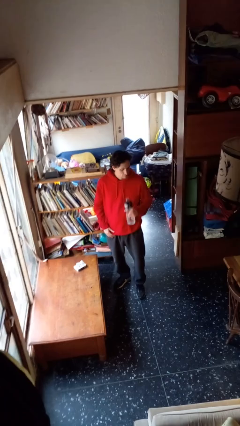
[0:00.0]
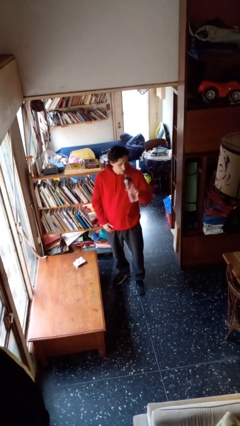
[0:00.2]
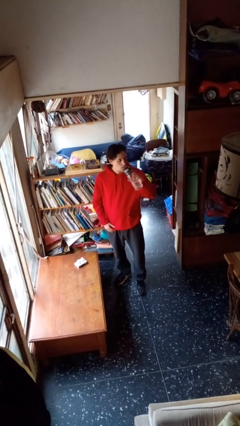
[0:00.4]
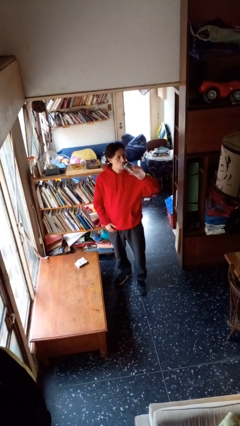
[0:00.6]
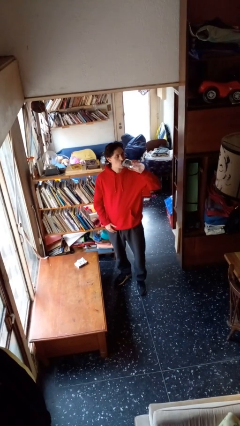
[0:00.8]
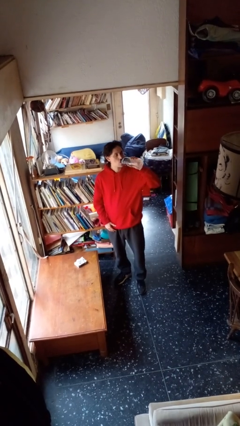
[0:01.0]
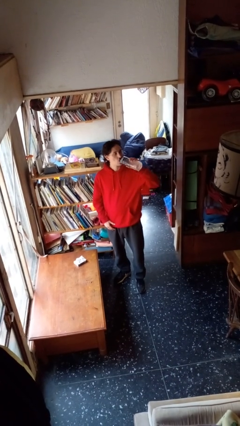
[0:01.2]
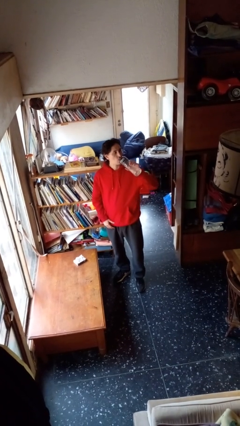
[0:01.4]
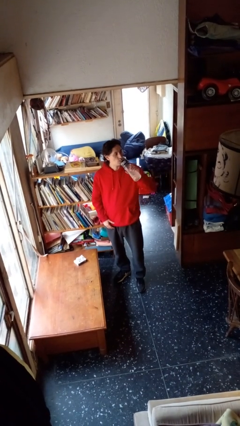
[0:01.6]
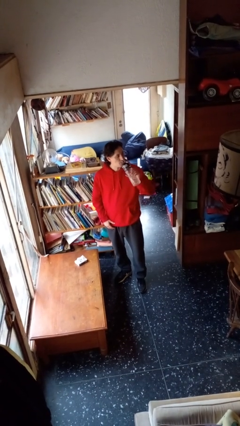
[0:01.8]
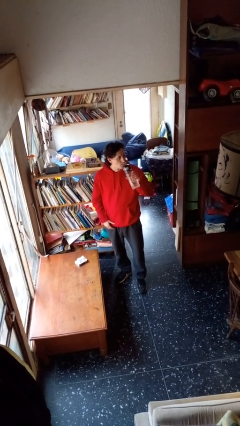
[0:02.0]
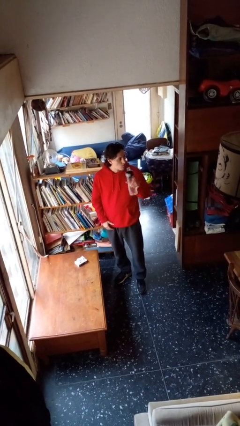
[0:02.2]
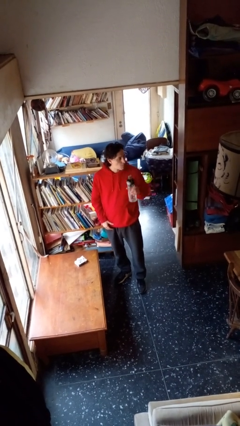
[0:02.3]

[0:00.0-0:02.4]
person drinks from bottle

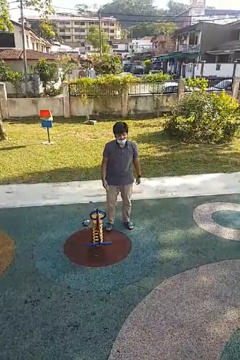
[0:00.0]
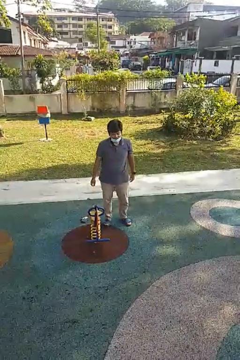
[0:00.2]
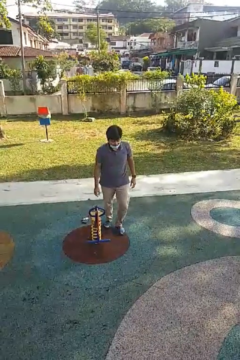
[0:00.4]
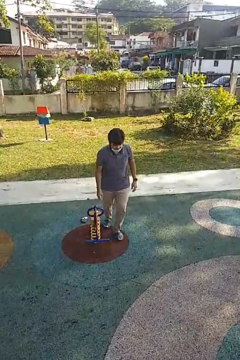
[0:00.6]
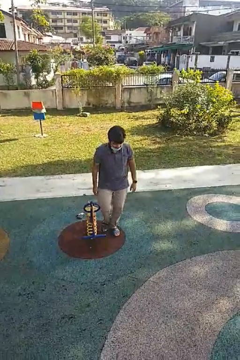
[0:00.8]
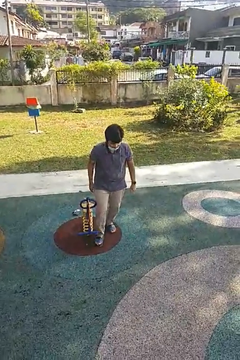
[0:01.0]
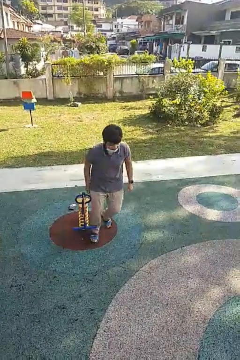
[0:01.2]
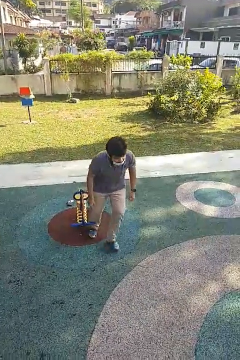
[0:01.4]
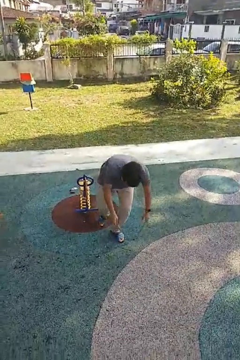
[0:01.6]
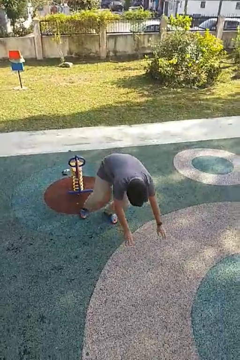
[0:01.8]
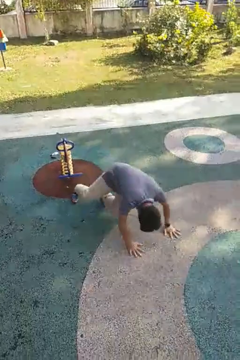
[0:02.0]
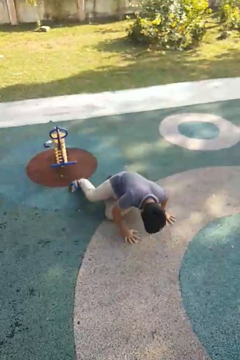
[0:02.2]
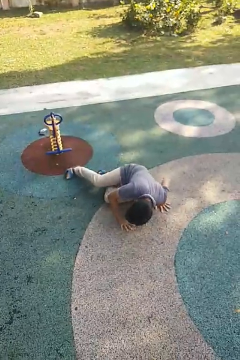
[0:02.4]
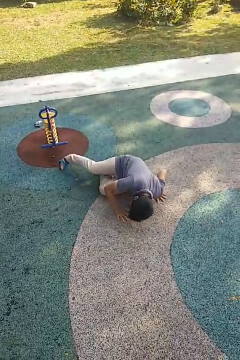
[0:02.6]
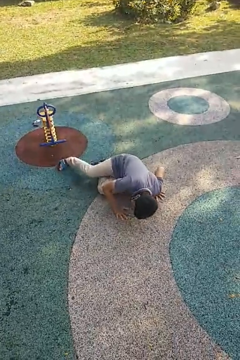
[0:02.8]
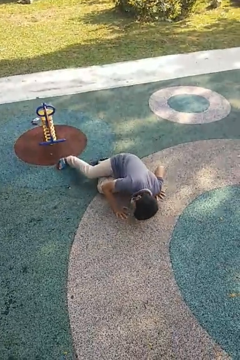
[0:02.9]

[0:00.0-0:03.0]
person trips on object on floor

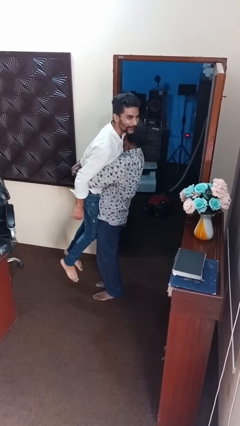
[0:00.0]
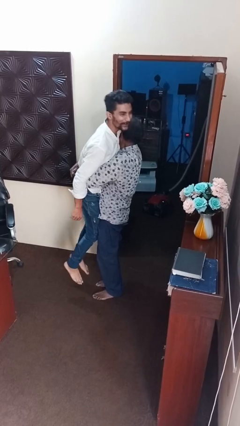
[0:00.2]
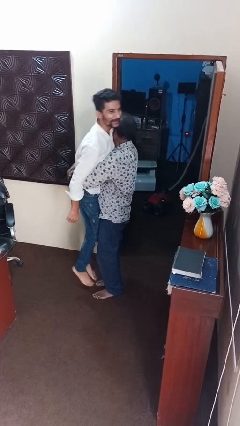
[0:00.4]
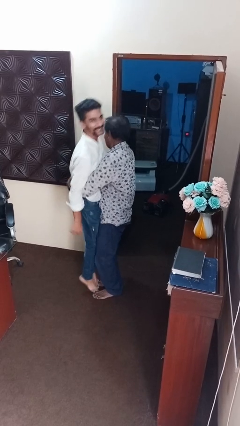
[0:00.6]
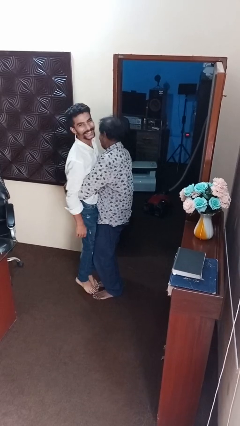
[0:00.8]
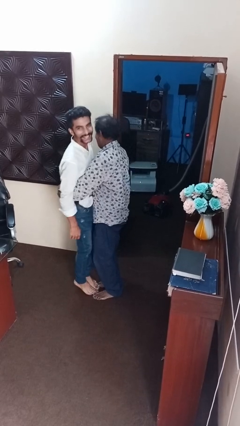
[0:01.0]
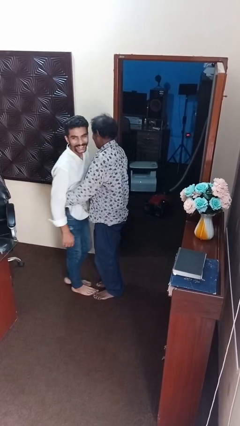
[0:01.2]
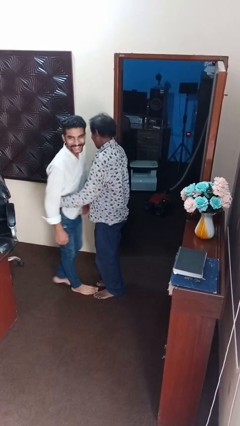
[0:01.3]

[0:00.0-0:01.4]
person puts down person

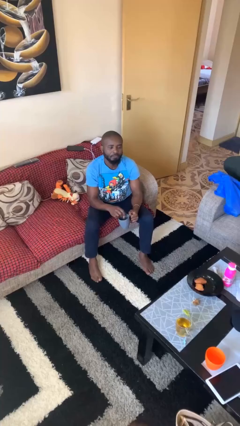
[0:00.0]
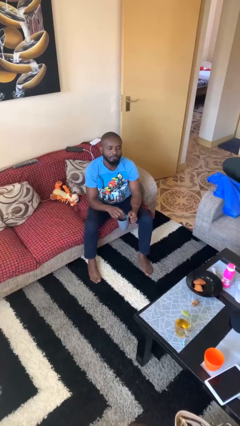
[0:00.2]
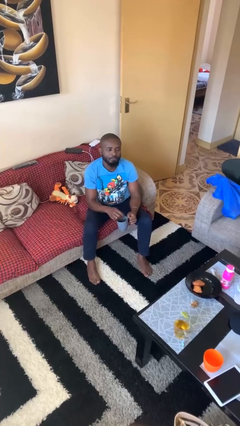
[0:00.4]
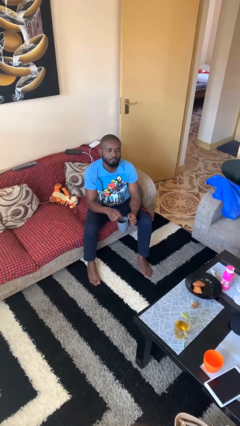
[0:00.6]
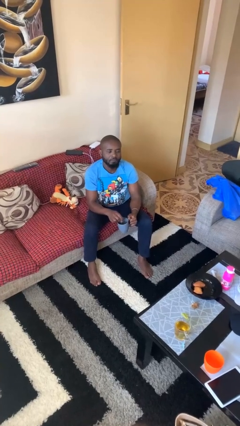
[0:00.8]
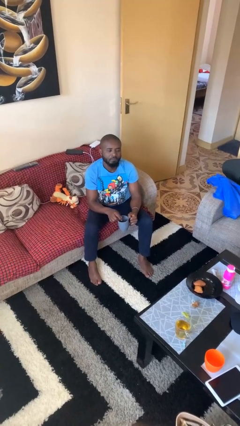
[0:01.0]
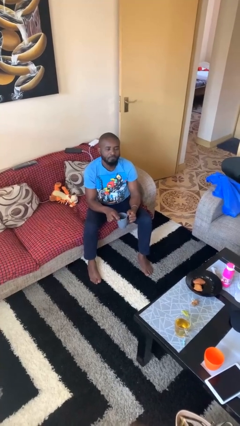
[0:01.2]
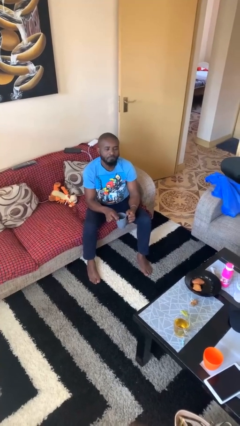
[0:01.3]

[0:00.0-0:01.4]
person stirs mug

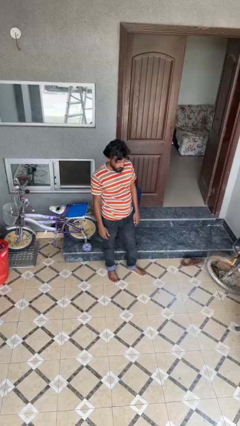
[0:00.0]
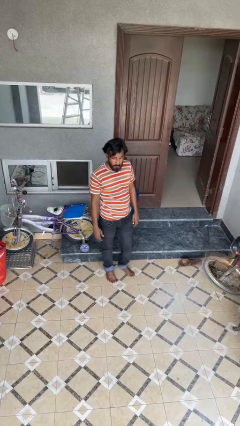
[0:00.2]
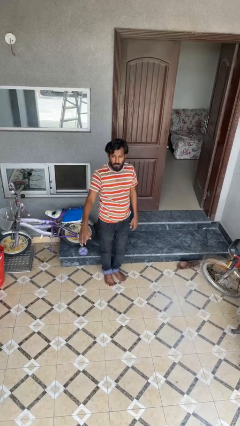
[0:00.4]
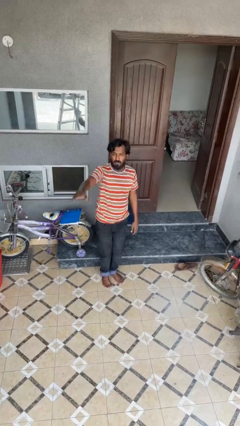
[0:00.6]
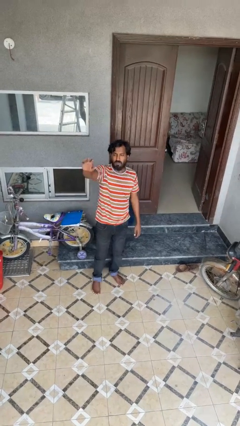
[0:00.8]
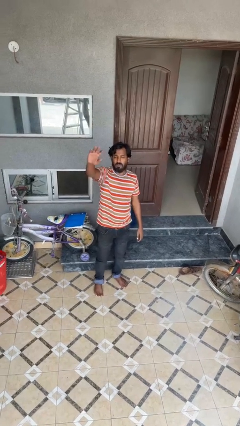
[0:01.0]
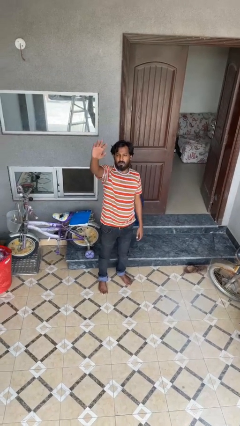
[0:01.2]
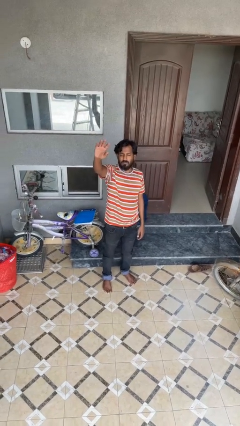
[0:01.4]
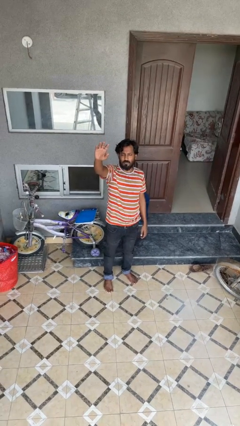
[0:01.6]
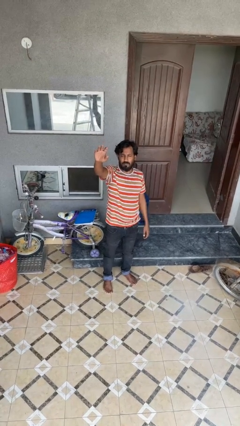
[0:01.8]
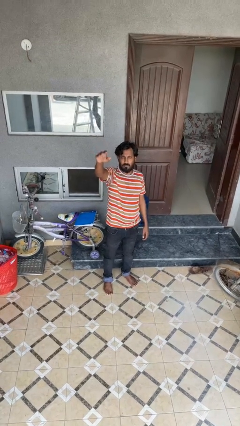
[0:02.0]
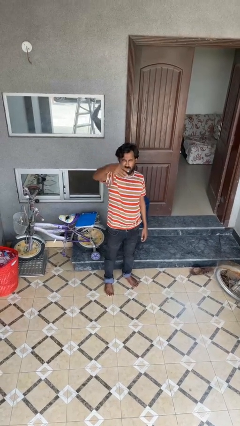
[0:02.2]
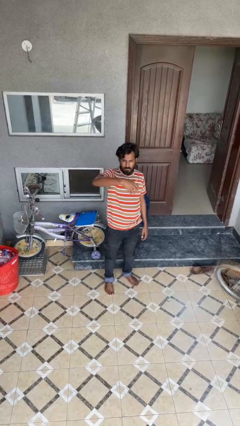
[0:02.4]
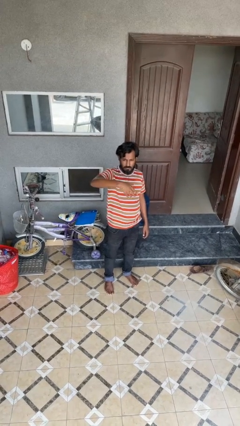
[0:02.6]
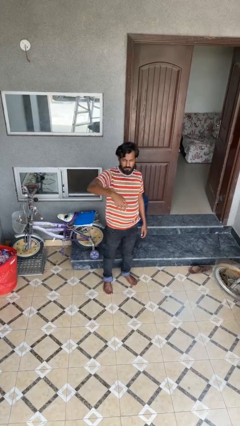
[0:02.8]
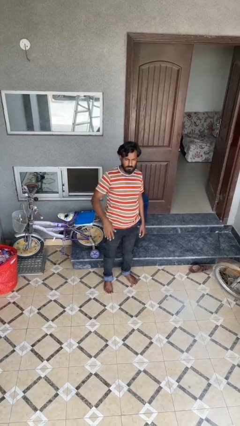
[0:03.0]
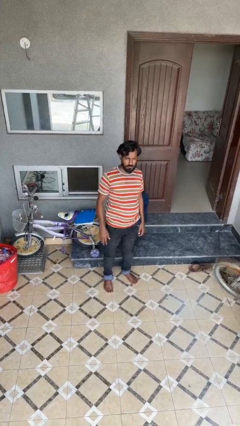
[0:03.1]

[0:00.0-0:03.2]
person gestures come here

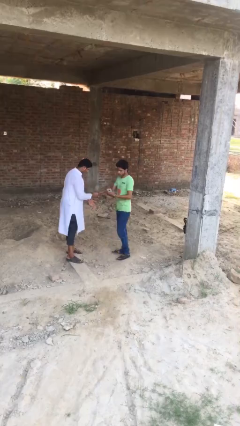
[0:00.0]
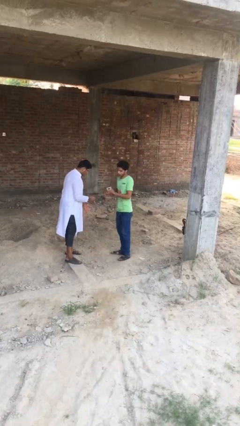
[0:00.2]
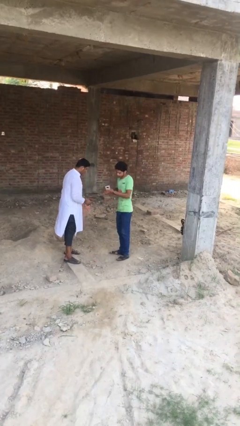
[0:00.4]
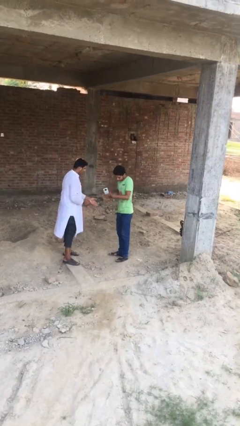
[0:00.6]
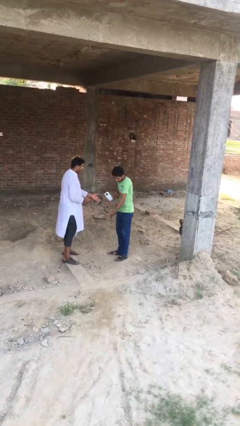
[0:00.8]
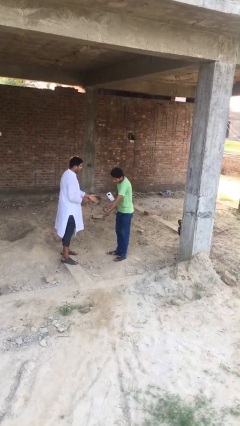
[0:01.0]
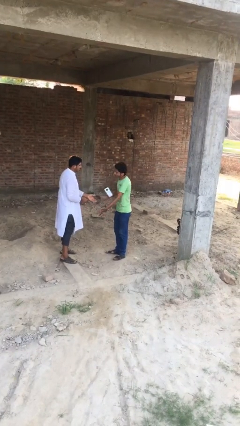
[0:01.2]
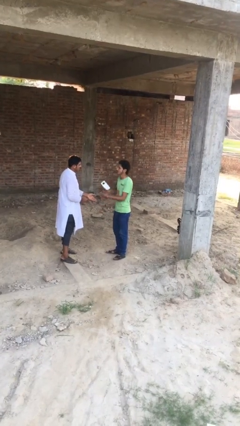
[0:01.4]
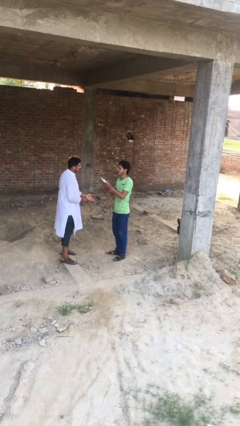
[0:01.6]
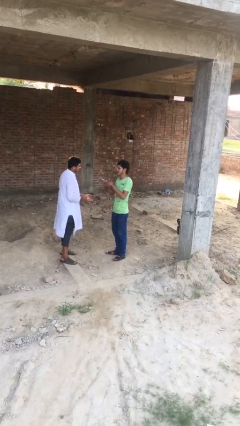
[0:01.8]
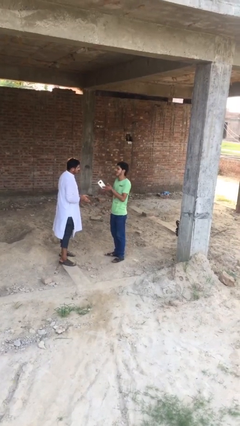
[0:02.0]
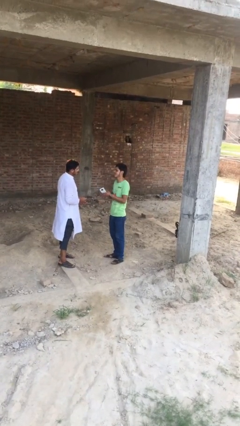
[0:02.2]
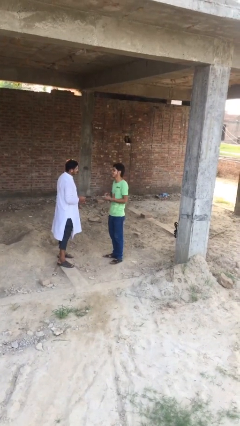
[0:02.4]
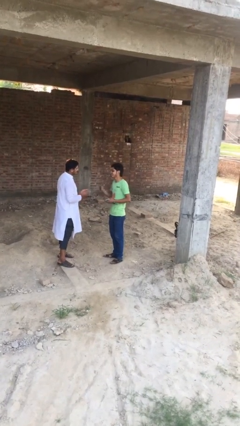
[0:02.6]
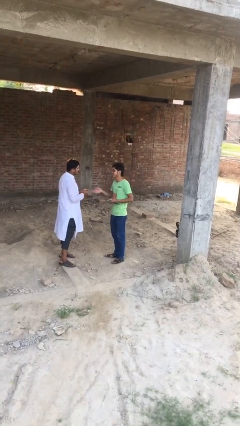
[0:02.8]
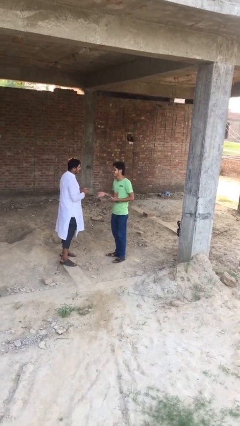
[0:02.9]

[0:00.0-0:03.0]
person talks to person

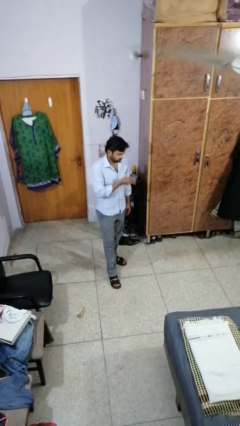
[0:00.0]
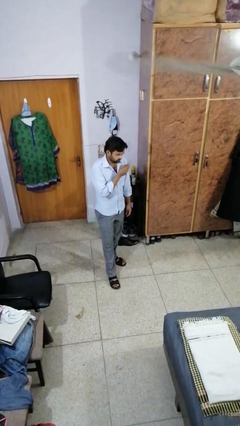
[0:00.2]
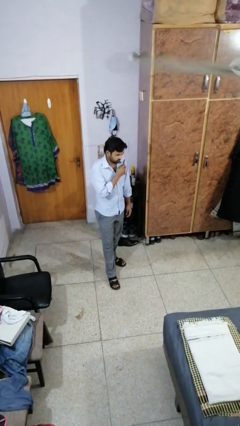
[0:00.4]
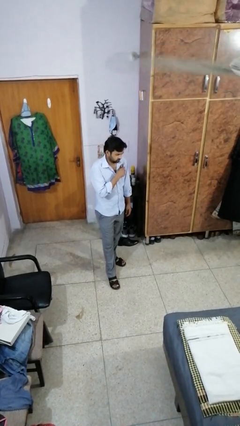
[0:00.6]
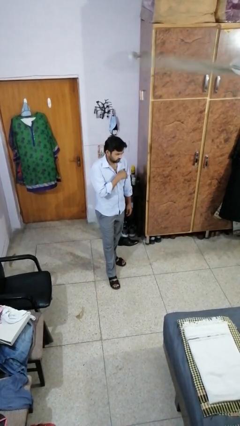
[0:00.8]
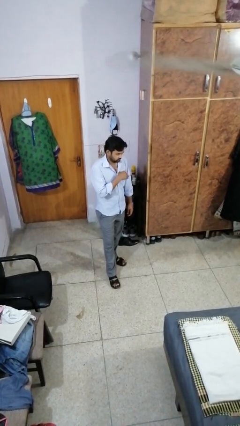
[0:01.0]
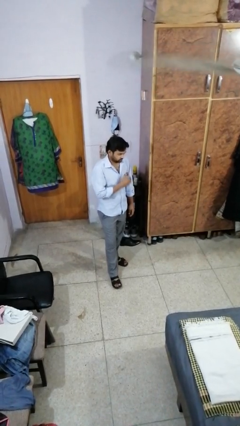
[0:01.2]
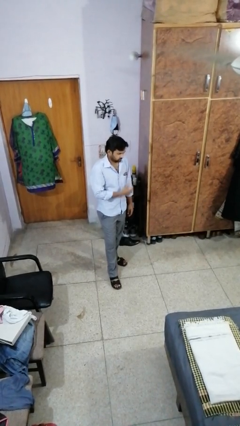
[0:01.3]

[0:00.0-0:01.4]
person puts phone into pocket

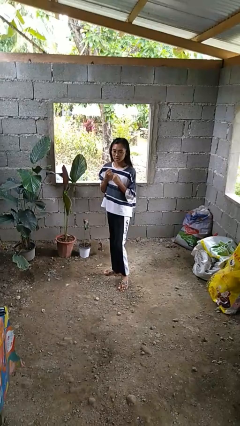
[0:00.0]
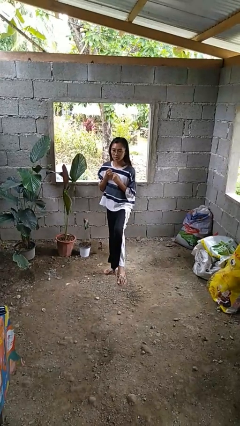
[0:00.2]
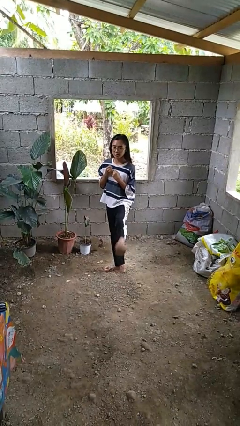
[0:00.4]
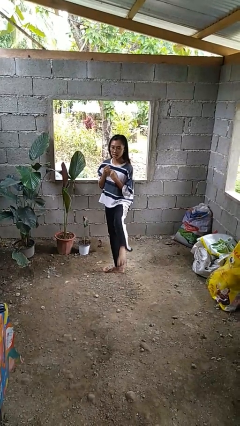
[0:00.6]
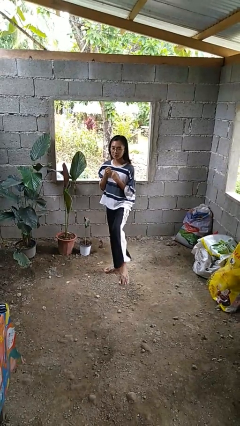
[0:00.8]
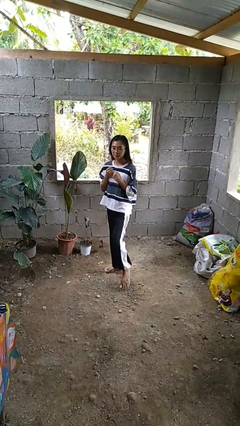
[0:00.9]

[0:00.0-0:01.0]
person karate kicks

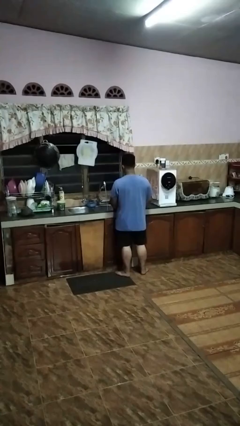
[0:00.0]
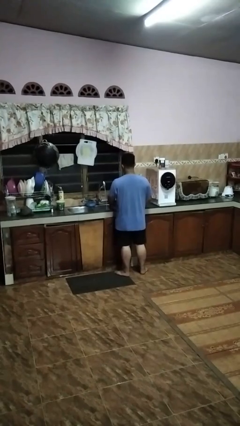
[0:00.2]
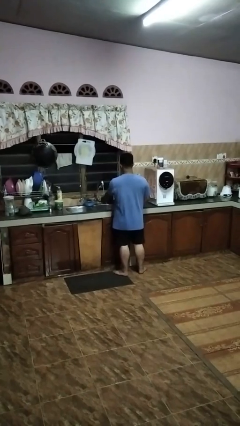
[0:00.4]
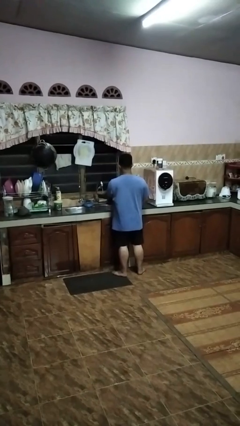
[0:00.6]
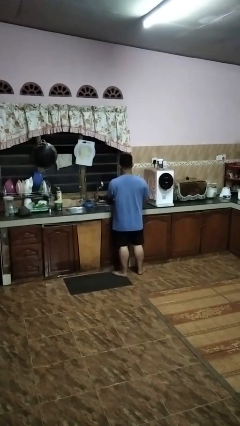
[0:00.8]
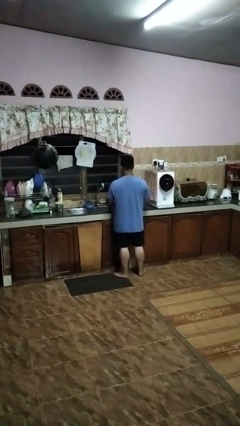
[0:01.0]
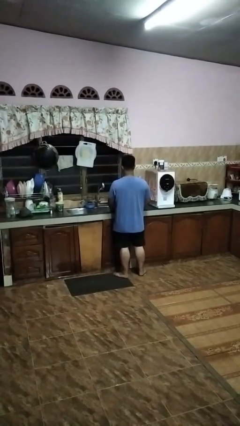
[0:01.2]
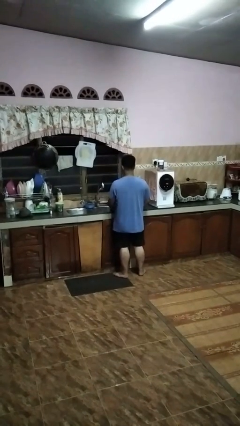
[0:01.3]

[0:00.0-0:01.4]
person turns off faucet
